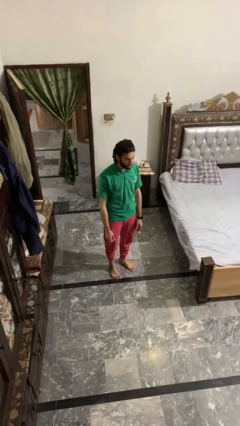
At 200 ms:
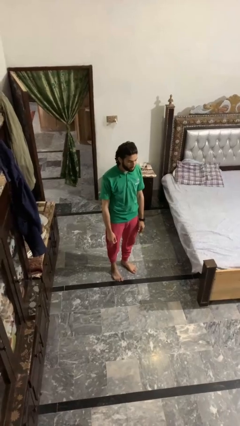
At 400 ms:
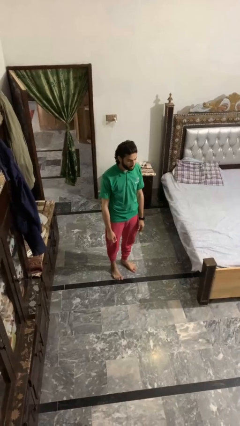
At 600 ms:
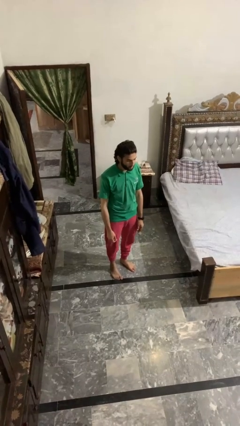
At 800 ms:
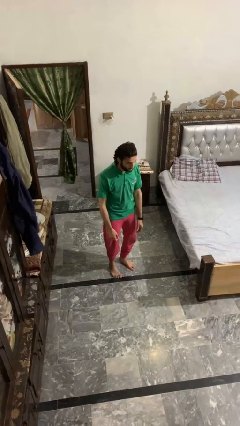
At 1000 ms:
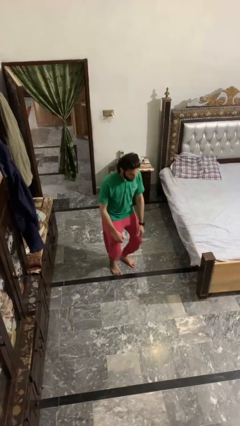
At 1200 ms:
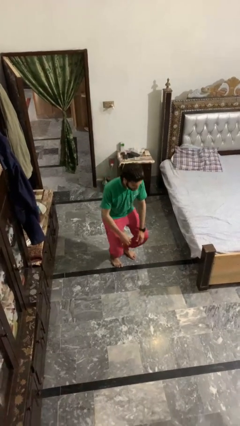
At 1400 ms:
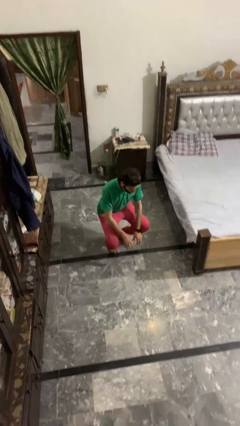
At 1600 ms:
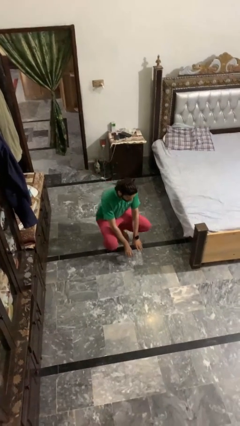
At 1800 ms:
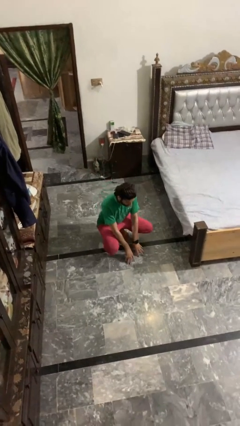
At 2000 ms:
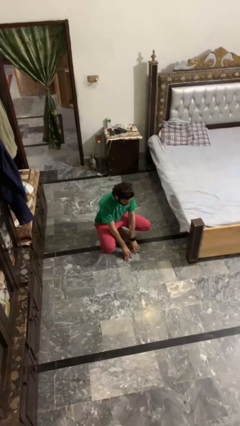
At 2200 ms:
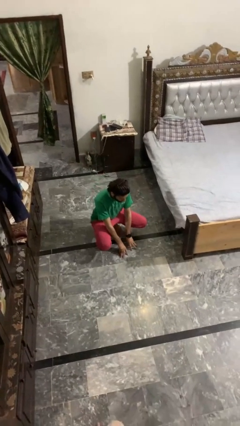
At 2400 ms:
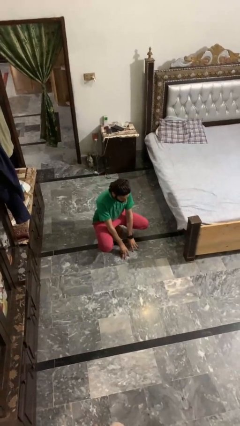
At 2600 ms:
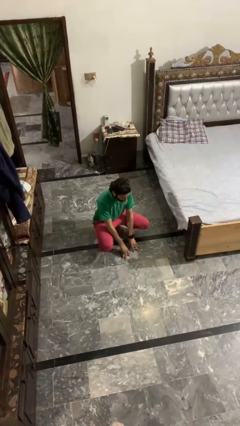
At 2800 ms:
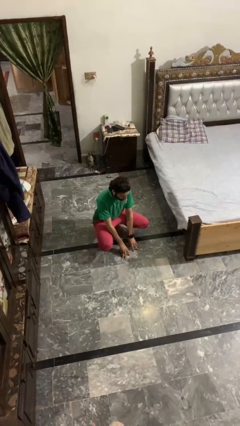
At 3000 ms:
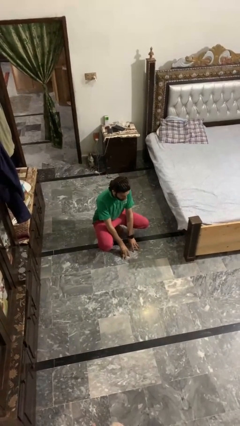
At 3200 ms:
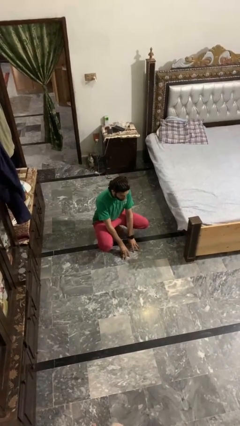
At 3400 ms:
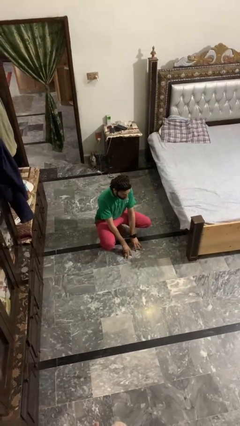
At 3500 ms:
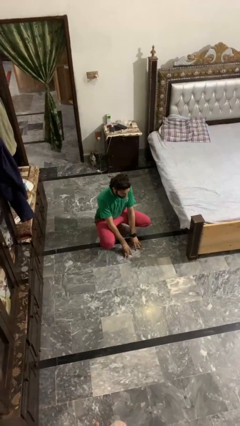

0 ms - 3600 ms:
person squats

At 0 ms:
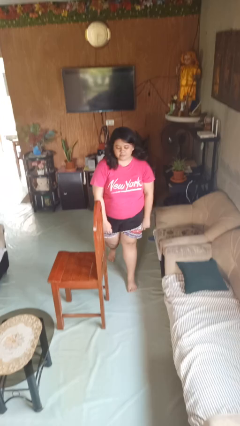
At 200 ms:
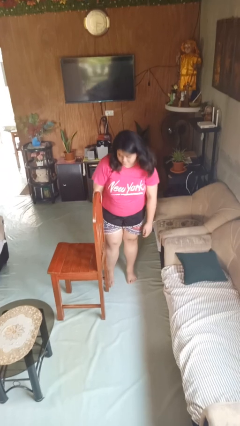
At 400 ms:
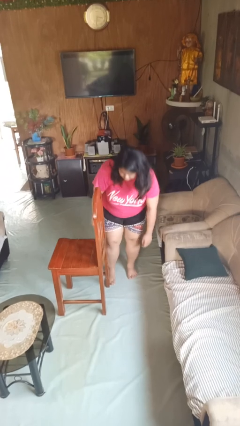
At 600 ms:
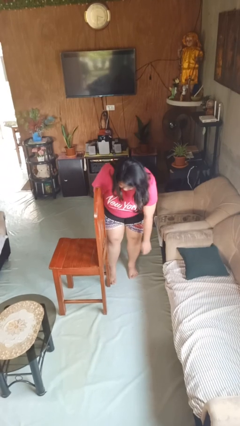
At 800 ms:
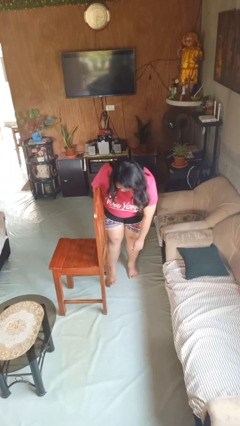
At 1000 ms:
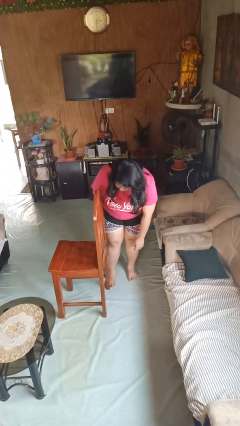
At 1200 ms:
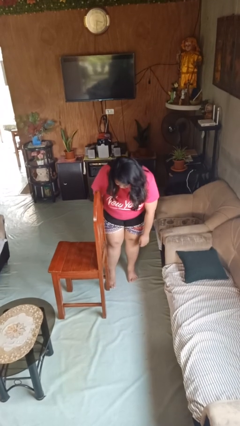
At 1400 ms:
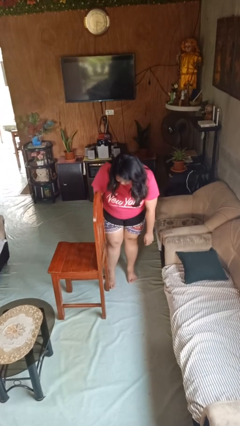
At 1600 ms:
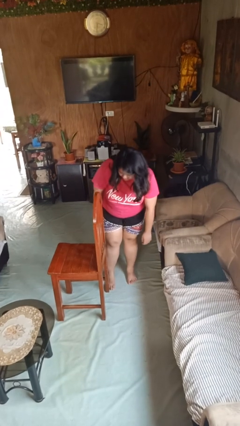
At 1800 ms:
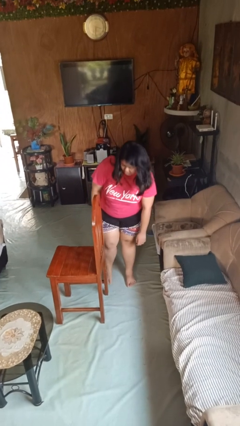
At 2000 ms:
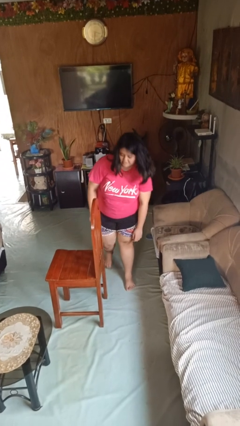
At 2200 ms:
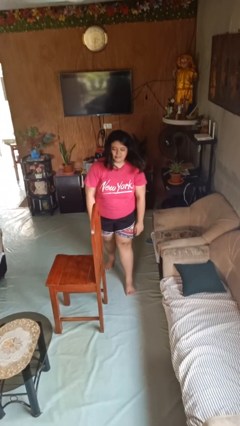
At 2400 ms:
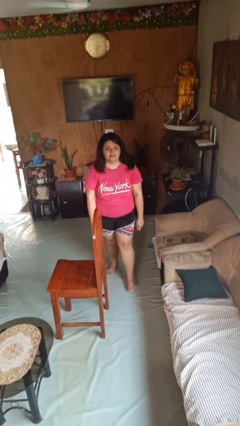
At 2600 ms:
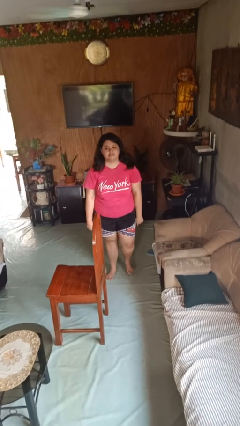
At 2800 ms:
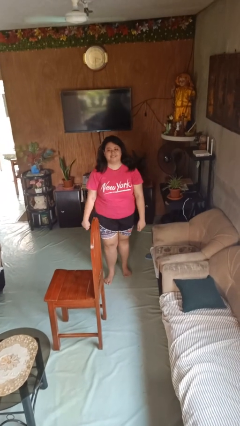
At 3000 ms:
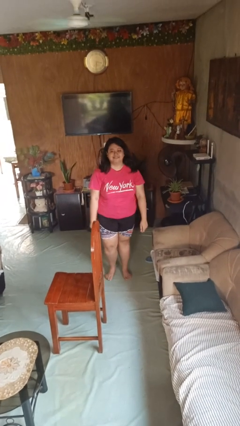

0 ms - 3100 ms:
person stubs toe

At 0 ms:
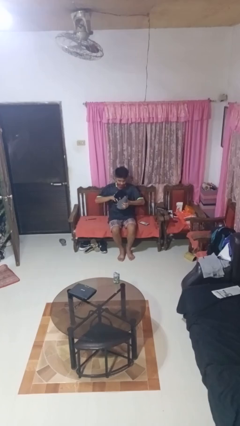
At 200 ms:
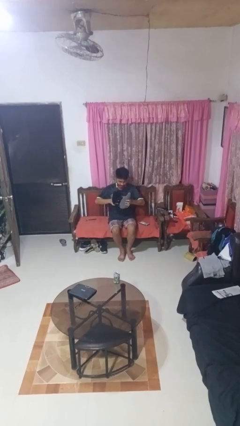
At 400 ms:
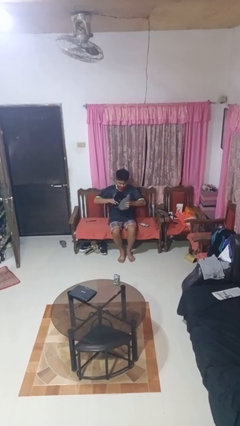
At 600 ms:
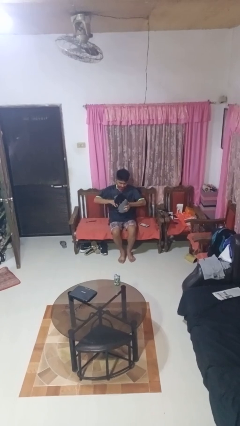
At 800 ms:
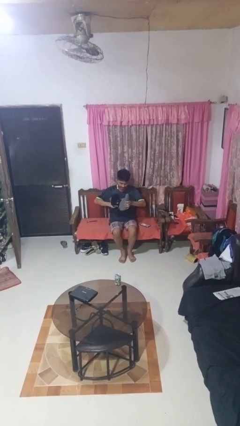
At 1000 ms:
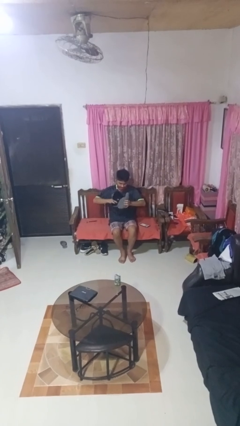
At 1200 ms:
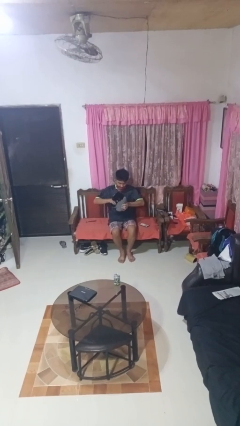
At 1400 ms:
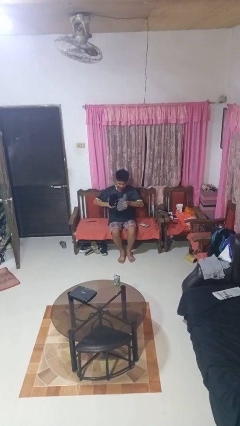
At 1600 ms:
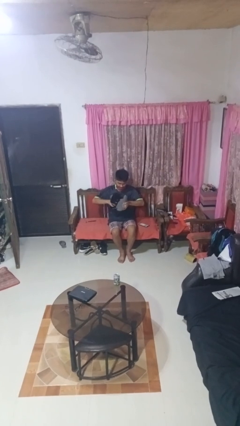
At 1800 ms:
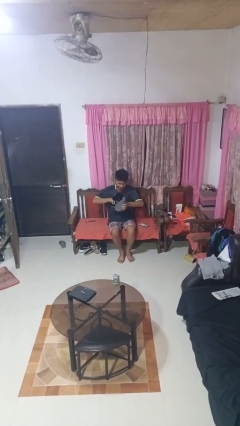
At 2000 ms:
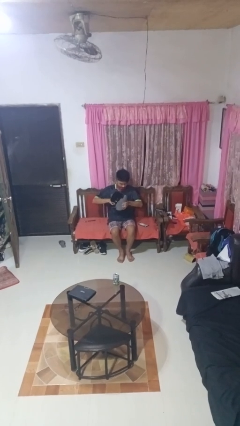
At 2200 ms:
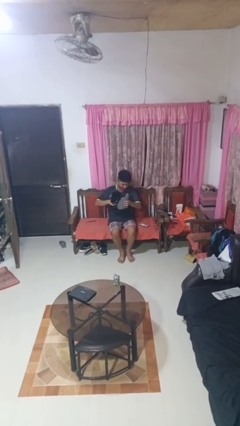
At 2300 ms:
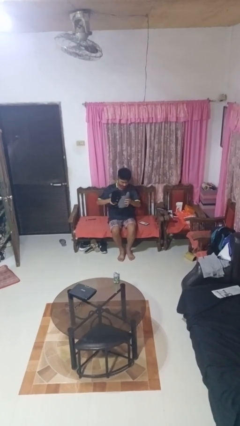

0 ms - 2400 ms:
person squeezes object

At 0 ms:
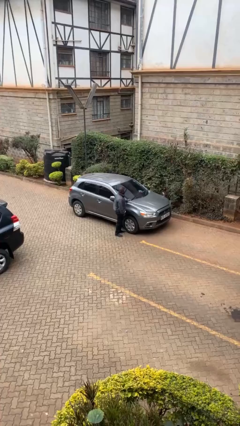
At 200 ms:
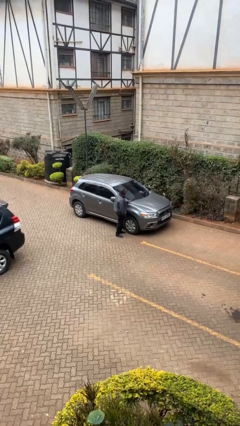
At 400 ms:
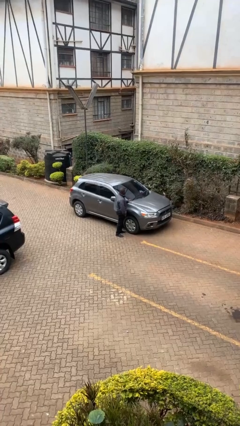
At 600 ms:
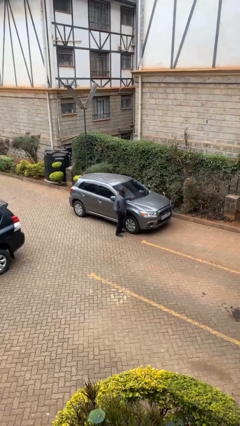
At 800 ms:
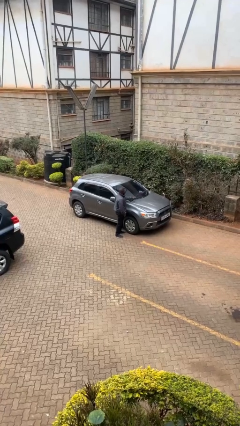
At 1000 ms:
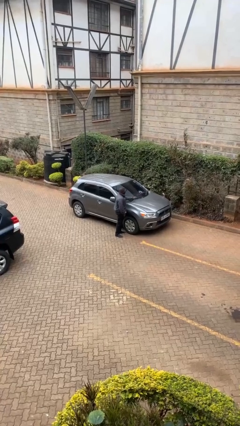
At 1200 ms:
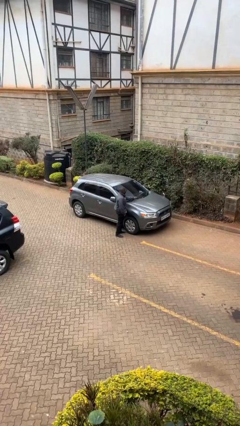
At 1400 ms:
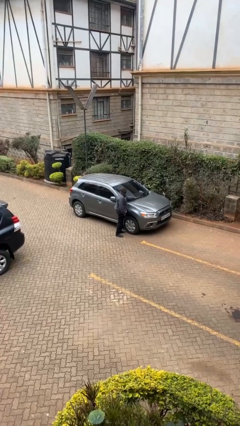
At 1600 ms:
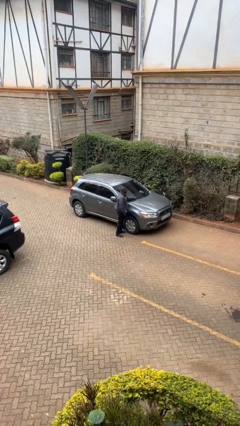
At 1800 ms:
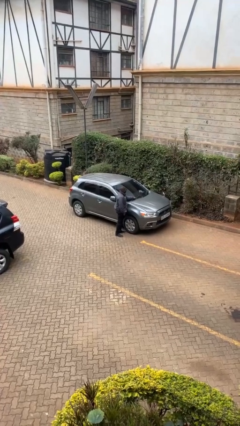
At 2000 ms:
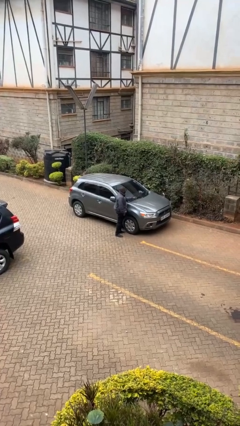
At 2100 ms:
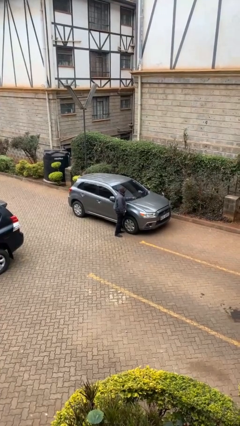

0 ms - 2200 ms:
person flips down car wipers

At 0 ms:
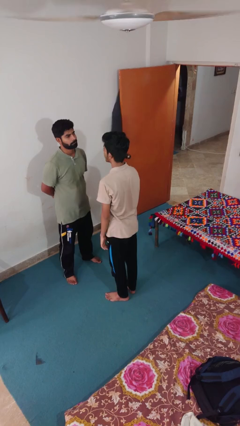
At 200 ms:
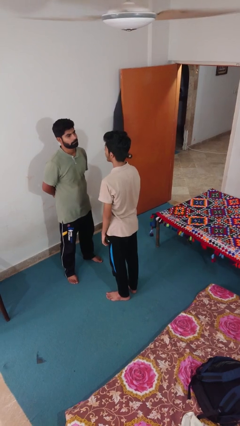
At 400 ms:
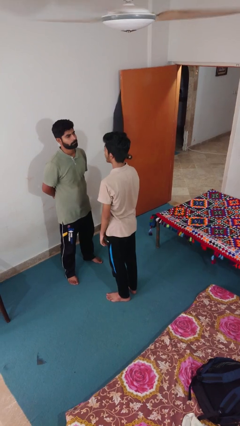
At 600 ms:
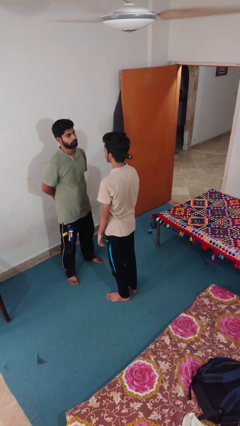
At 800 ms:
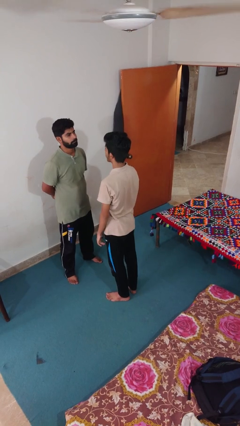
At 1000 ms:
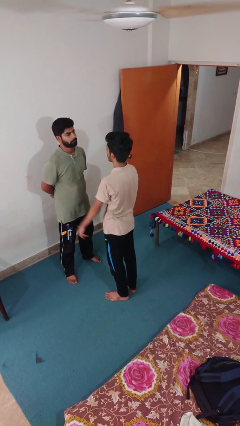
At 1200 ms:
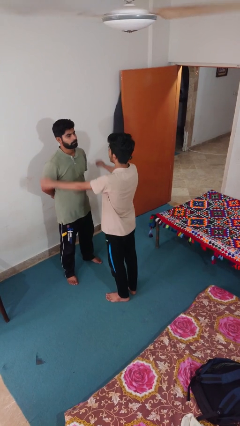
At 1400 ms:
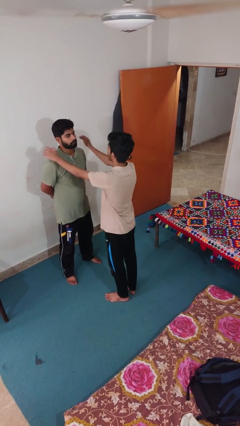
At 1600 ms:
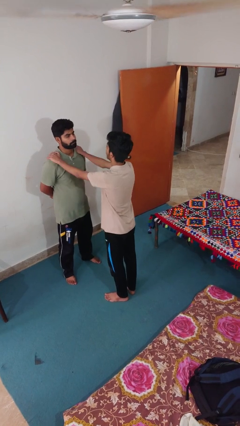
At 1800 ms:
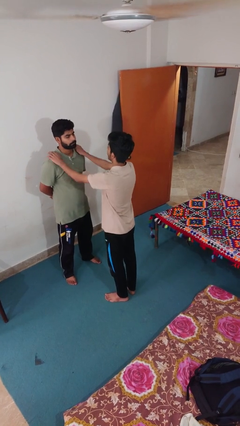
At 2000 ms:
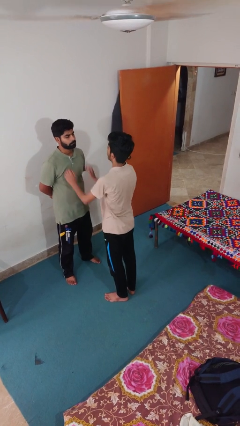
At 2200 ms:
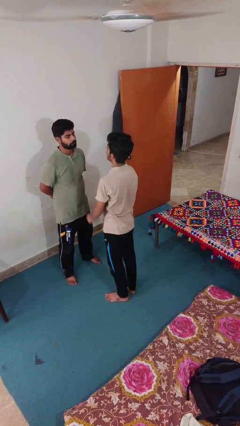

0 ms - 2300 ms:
person pounds shoulders of person

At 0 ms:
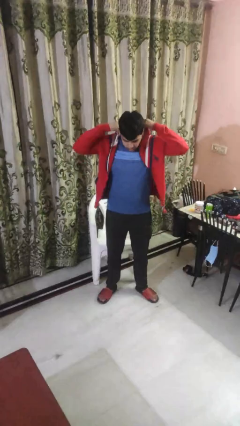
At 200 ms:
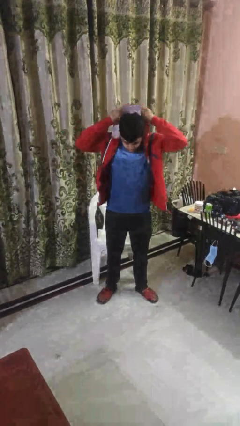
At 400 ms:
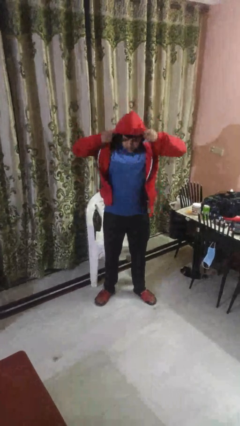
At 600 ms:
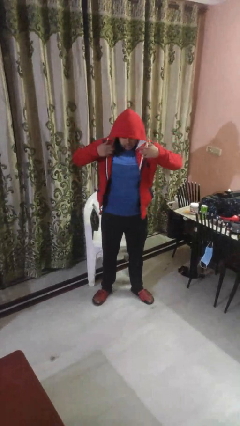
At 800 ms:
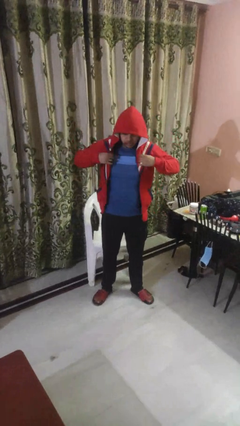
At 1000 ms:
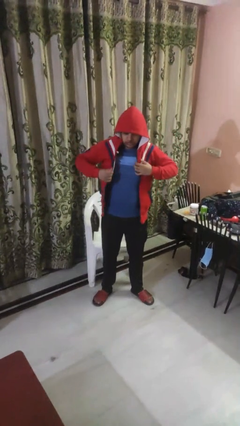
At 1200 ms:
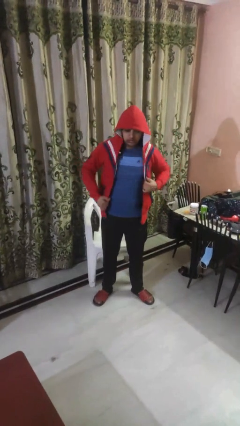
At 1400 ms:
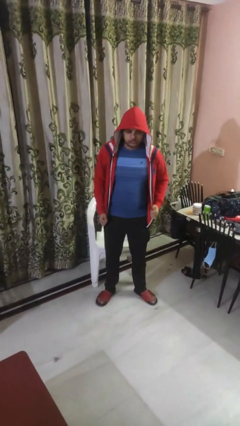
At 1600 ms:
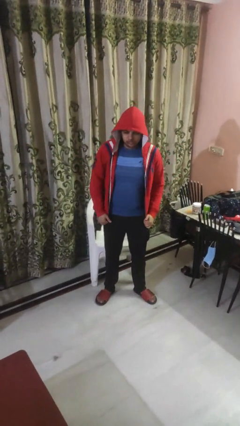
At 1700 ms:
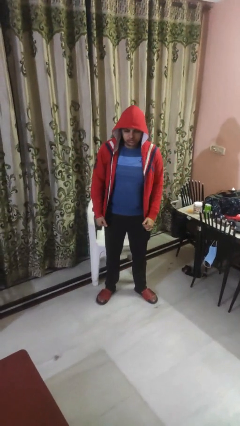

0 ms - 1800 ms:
person puts on hoodie

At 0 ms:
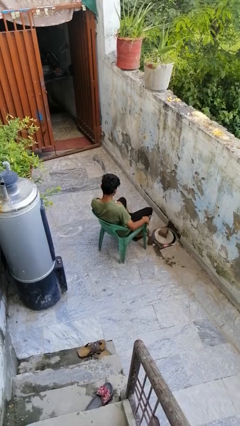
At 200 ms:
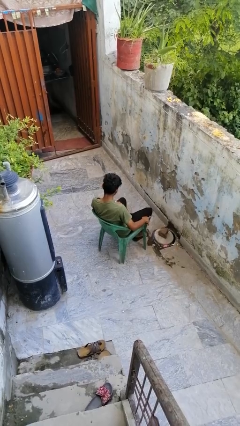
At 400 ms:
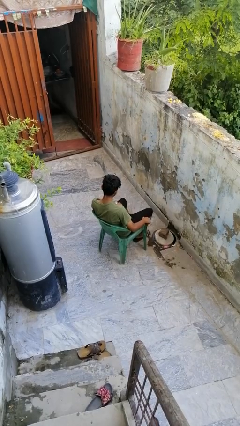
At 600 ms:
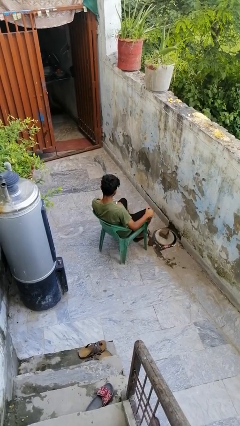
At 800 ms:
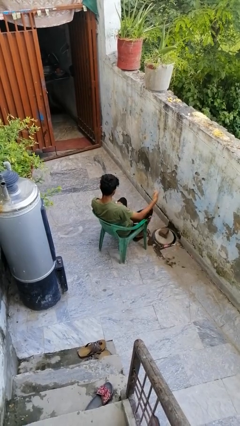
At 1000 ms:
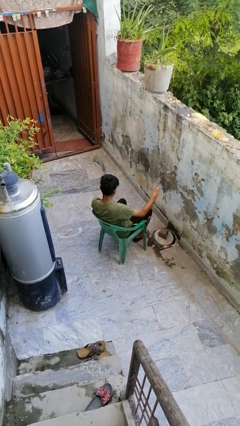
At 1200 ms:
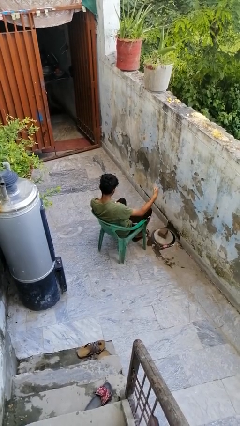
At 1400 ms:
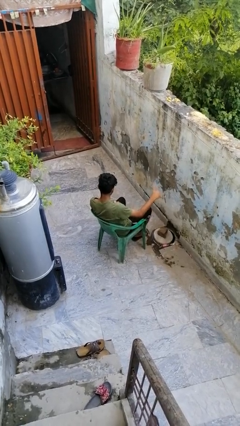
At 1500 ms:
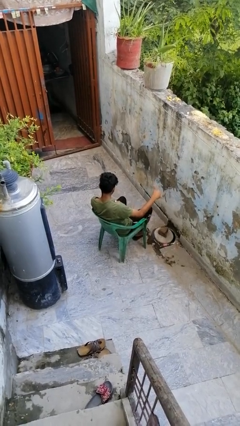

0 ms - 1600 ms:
person gestures hang loose

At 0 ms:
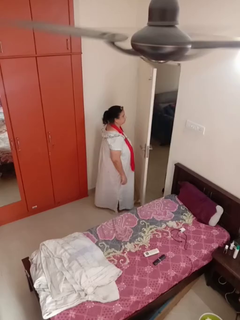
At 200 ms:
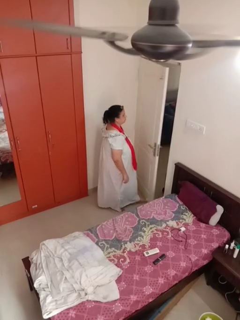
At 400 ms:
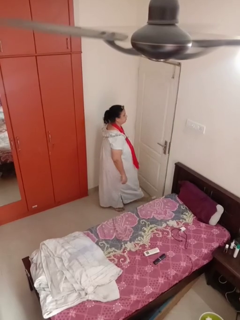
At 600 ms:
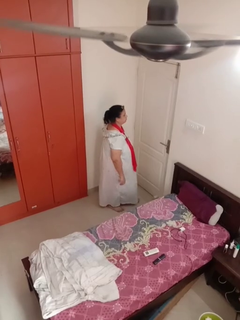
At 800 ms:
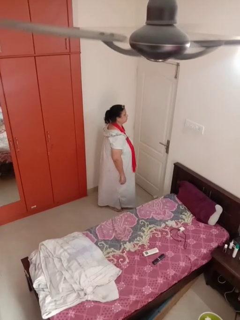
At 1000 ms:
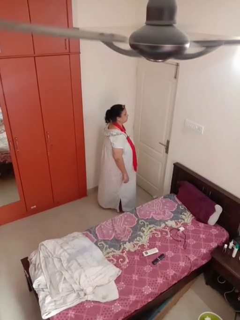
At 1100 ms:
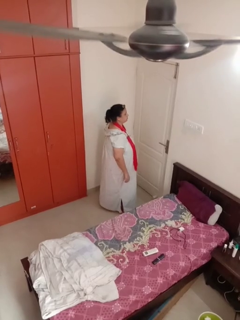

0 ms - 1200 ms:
person closes door with foot
